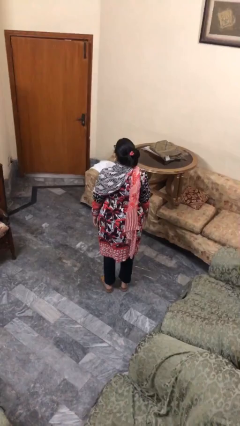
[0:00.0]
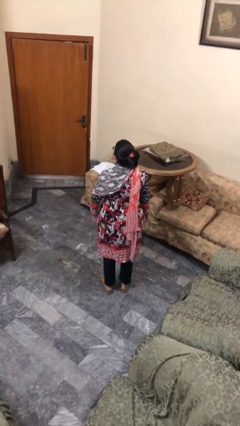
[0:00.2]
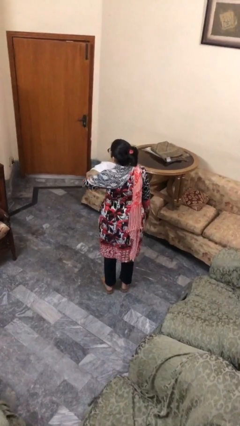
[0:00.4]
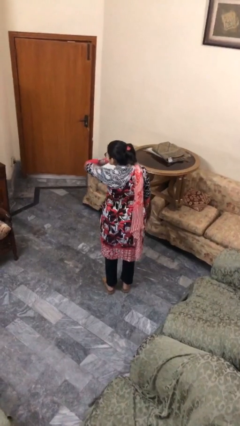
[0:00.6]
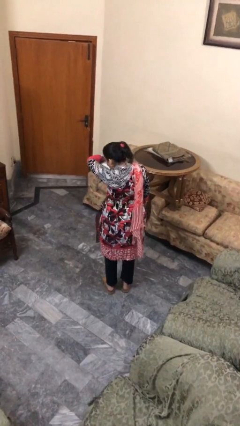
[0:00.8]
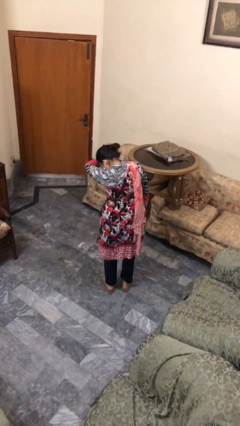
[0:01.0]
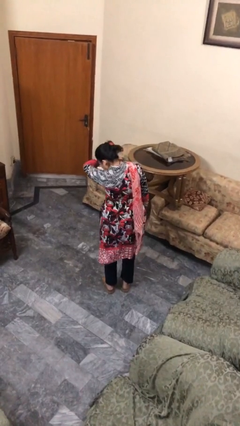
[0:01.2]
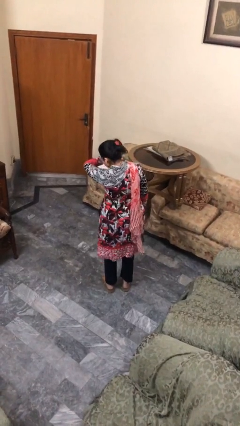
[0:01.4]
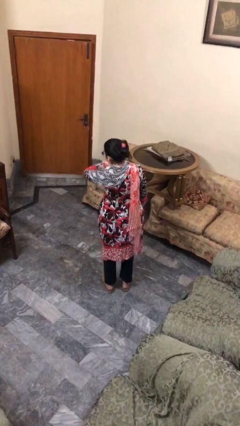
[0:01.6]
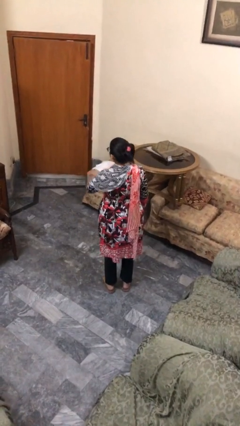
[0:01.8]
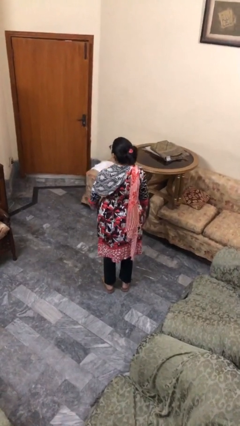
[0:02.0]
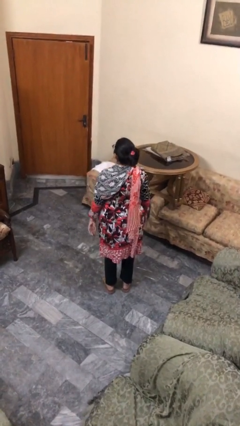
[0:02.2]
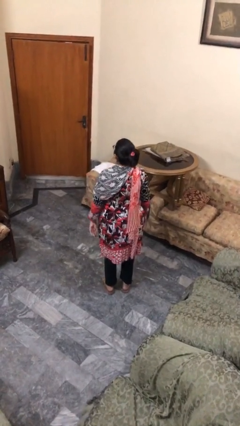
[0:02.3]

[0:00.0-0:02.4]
person sneezes into arm

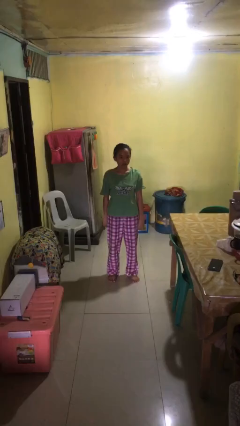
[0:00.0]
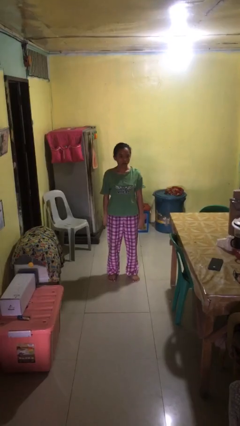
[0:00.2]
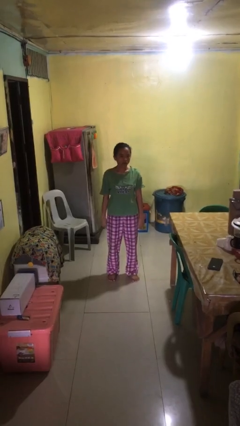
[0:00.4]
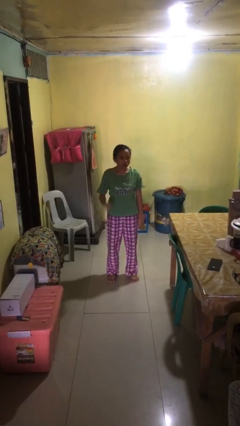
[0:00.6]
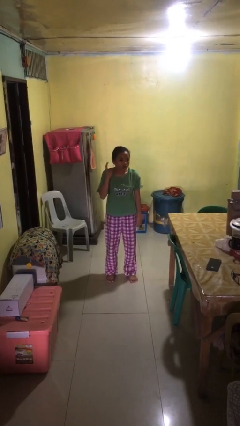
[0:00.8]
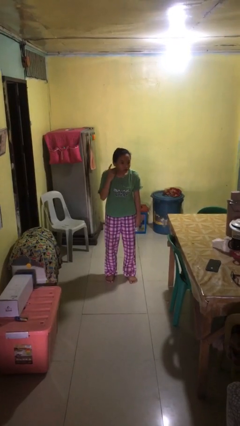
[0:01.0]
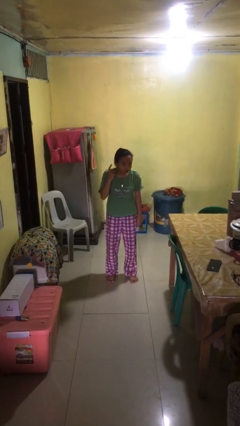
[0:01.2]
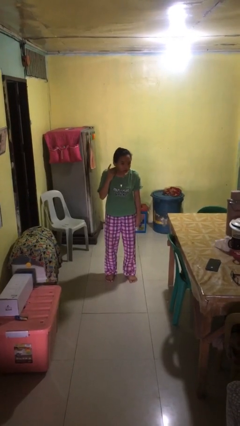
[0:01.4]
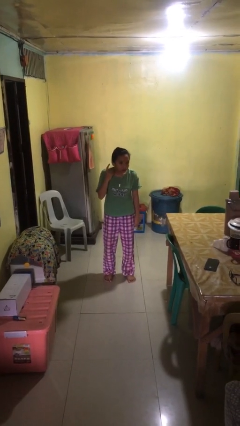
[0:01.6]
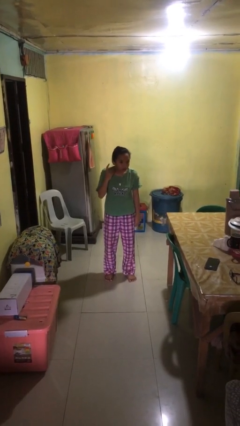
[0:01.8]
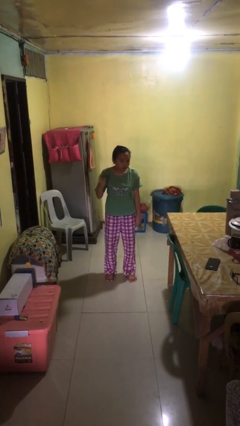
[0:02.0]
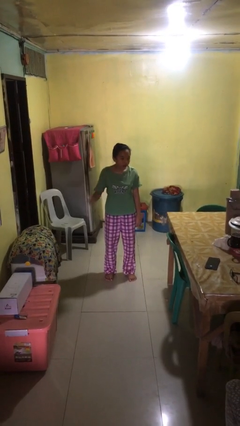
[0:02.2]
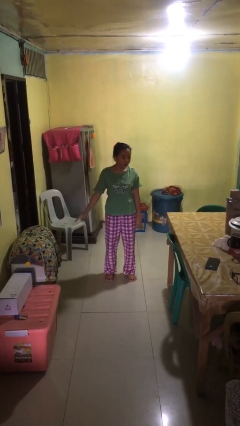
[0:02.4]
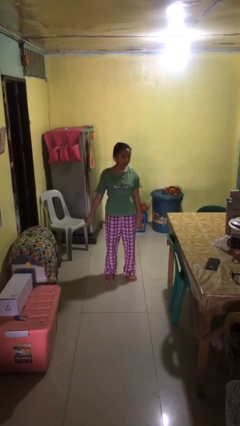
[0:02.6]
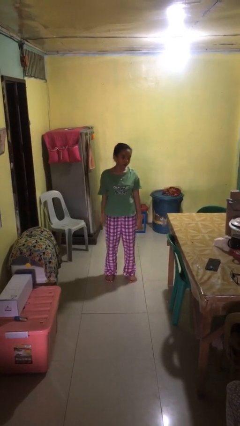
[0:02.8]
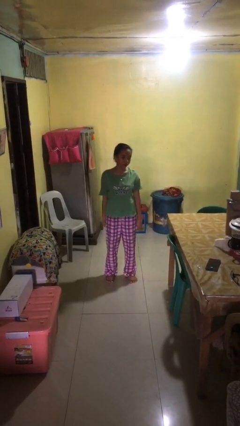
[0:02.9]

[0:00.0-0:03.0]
person gestures listen closely

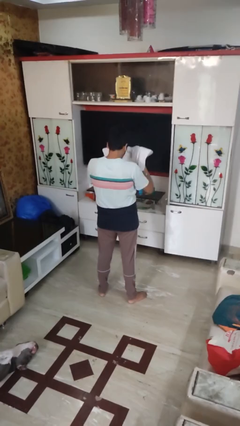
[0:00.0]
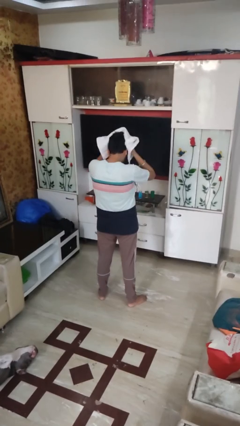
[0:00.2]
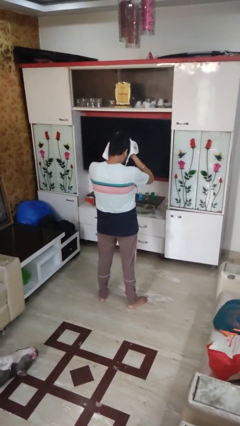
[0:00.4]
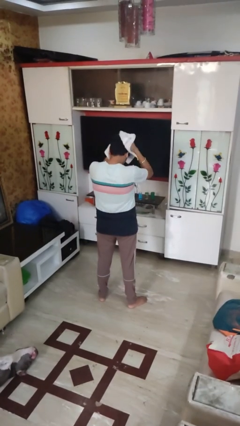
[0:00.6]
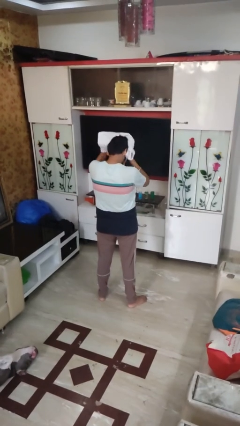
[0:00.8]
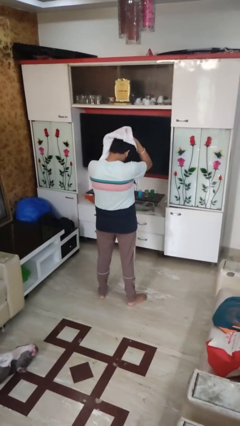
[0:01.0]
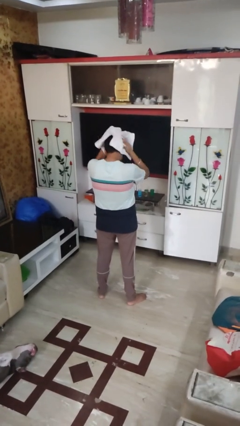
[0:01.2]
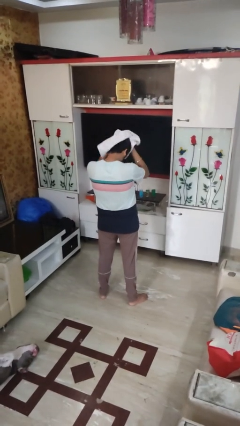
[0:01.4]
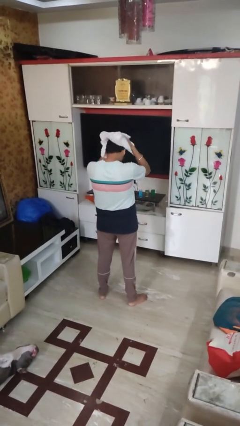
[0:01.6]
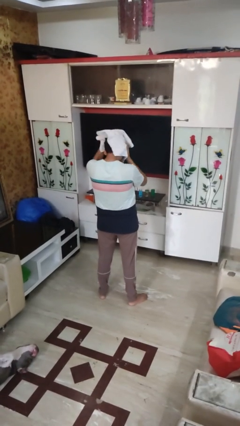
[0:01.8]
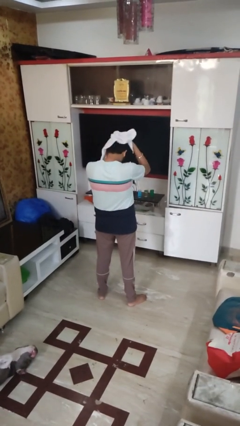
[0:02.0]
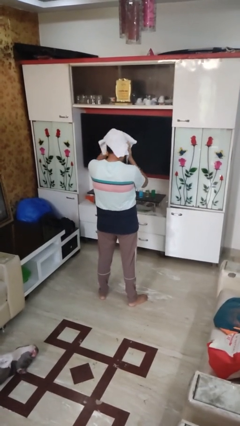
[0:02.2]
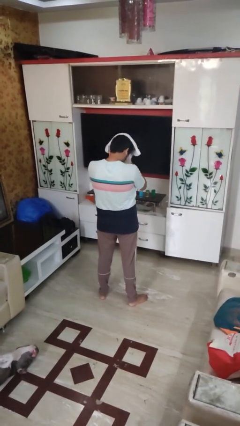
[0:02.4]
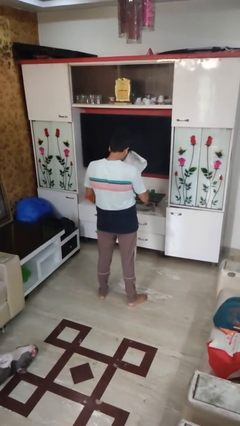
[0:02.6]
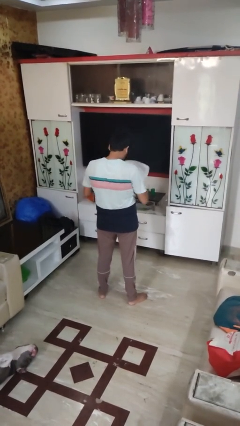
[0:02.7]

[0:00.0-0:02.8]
person dries hair with towel

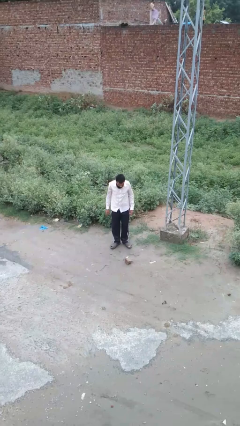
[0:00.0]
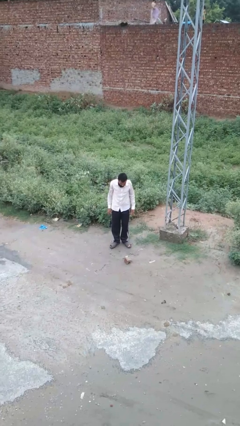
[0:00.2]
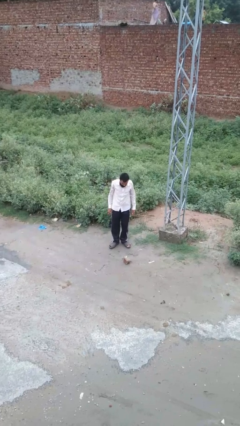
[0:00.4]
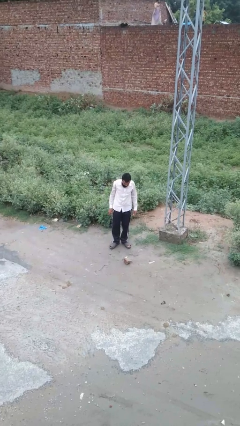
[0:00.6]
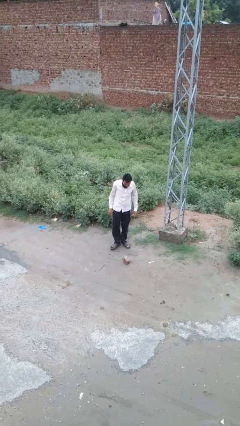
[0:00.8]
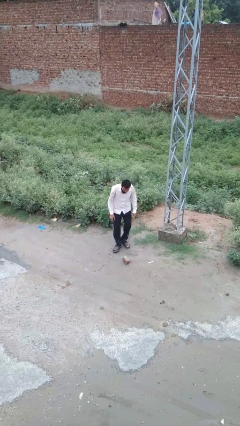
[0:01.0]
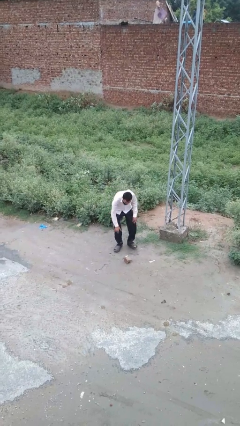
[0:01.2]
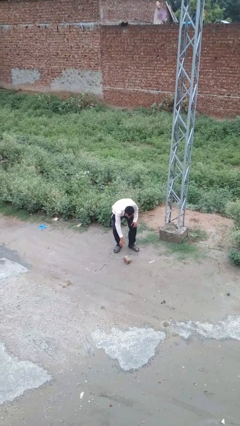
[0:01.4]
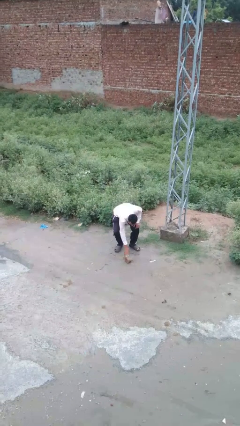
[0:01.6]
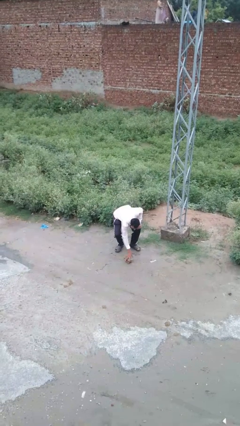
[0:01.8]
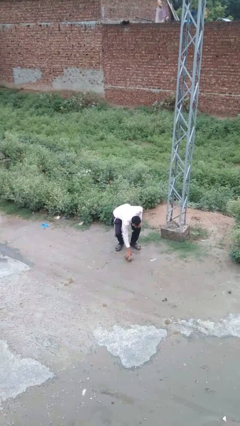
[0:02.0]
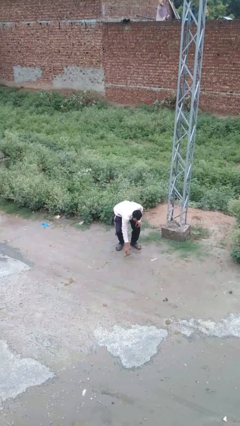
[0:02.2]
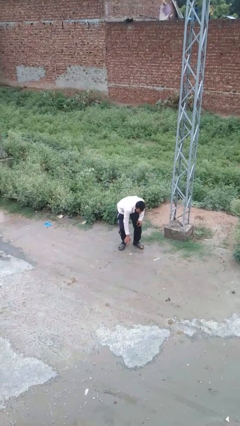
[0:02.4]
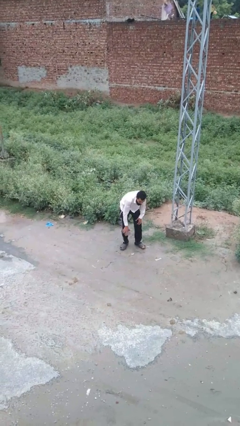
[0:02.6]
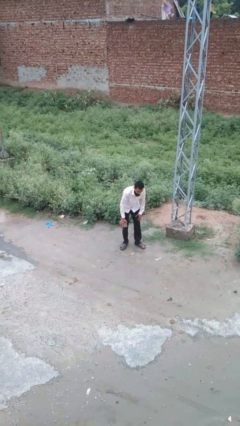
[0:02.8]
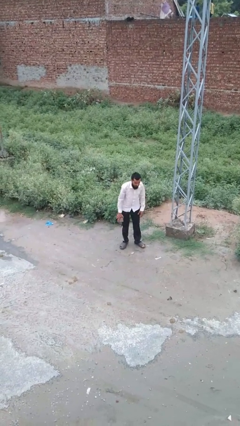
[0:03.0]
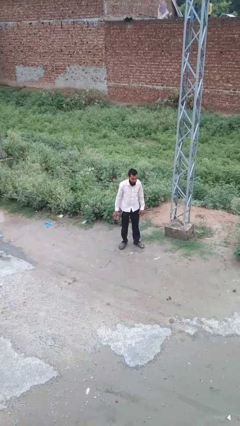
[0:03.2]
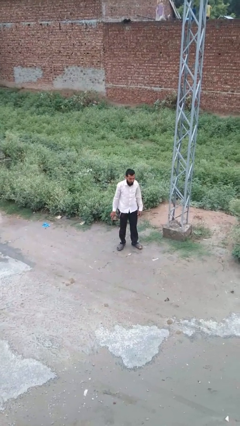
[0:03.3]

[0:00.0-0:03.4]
person picks up object from floor

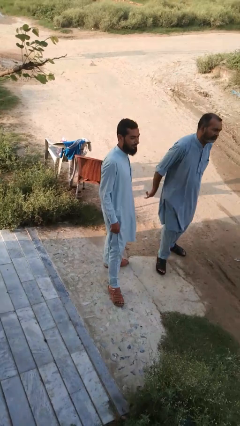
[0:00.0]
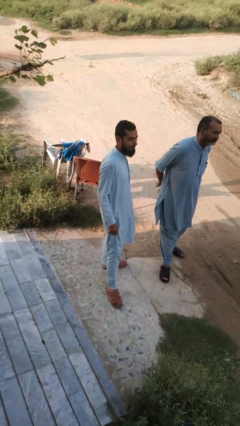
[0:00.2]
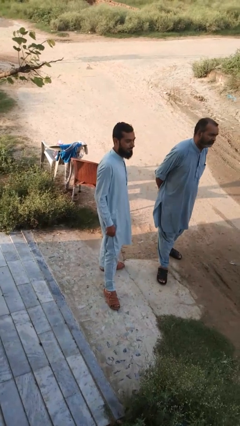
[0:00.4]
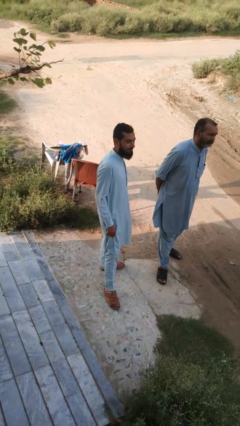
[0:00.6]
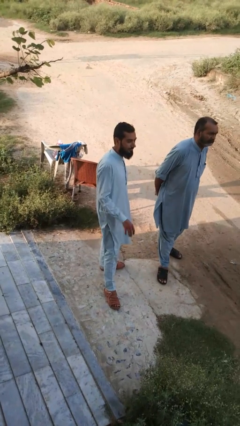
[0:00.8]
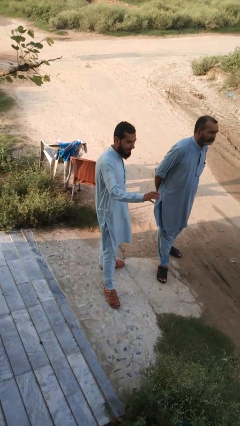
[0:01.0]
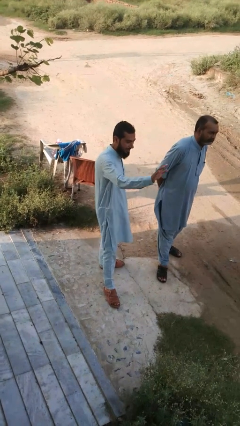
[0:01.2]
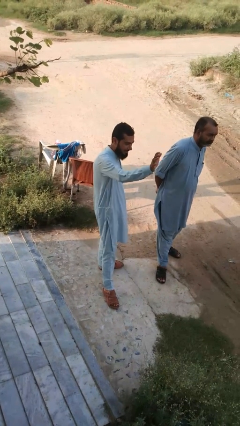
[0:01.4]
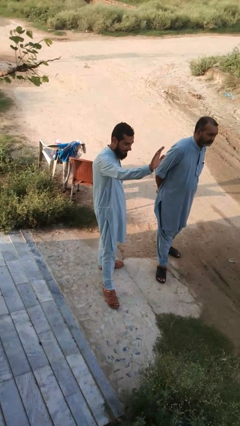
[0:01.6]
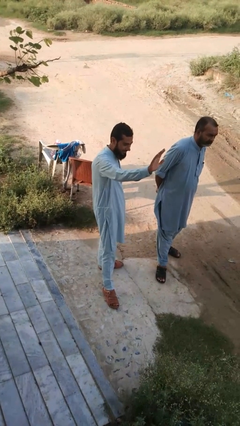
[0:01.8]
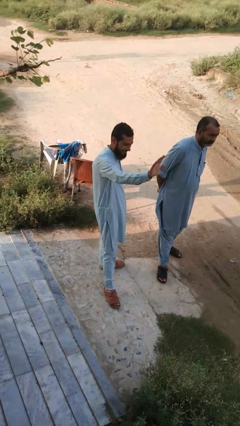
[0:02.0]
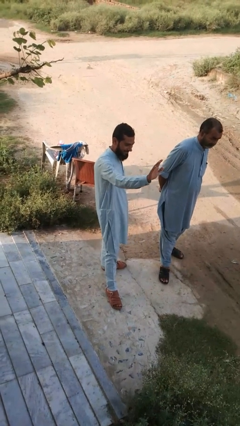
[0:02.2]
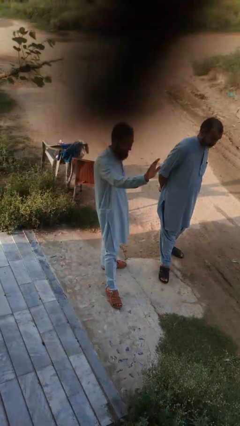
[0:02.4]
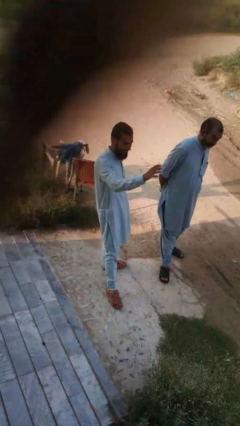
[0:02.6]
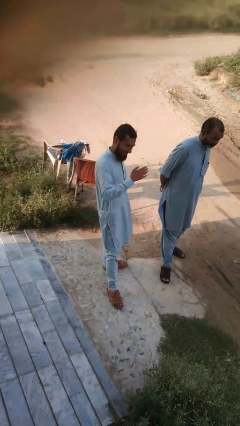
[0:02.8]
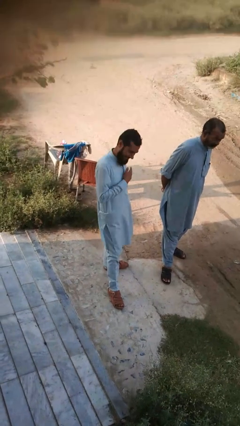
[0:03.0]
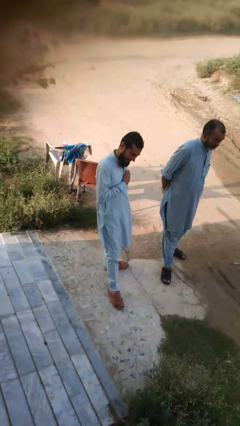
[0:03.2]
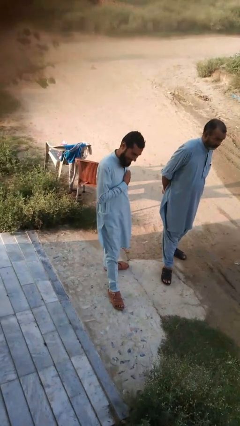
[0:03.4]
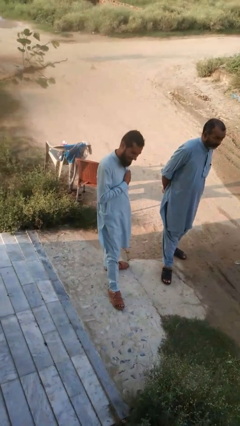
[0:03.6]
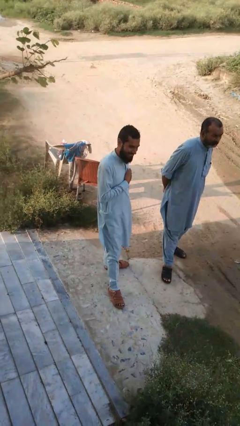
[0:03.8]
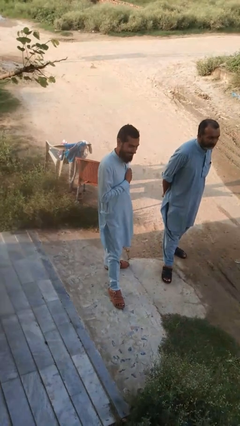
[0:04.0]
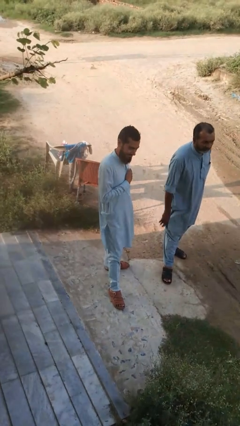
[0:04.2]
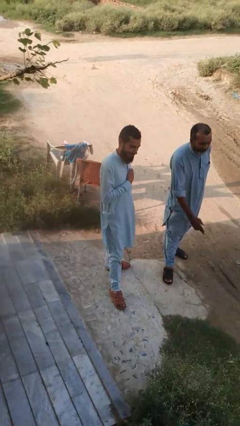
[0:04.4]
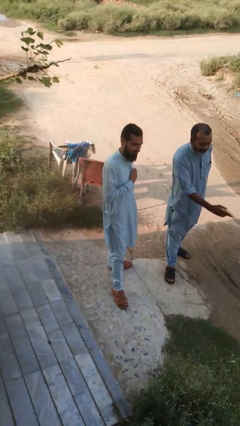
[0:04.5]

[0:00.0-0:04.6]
person waves at person

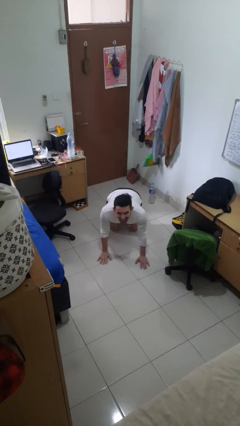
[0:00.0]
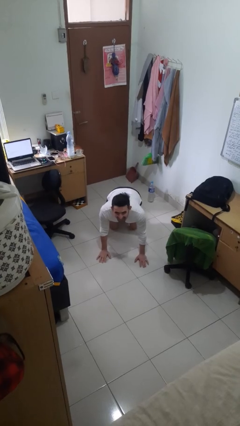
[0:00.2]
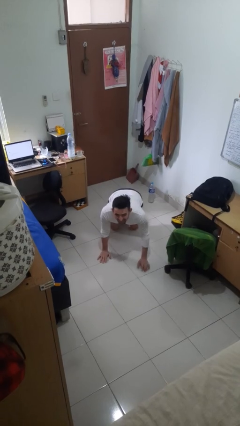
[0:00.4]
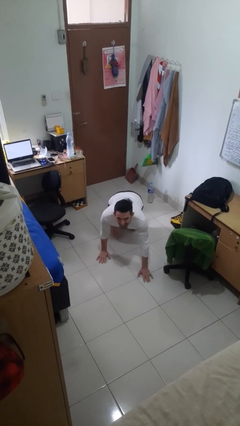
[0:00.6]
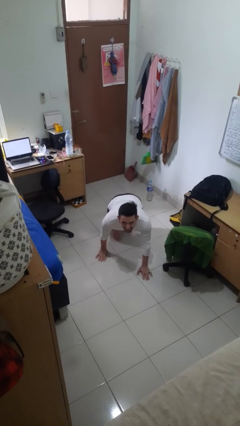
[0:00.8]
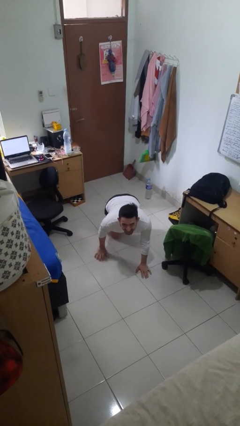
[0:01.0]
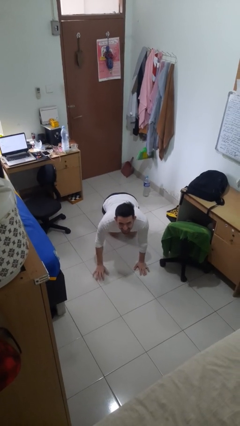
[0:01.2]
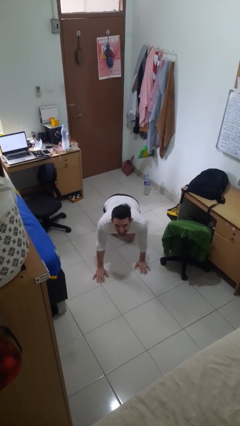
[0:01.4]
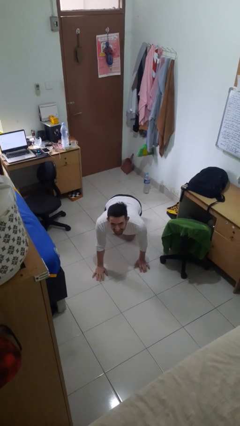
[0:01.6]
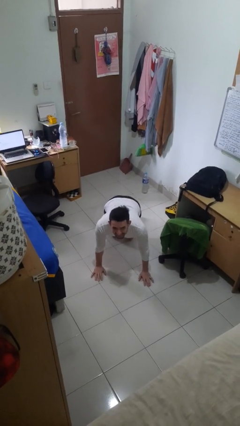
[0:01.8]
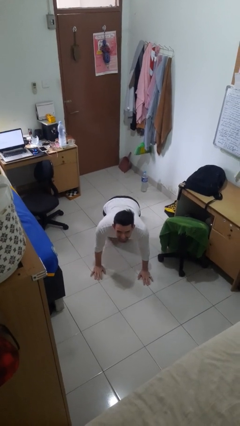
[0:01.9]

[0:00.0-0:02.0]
person crawls
